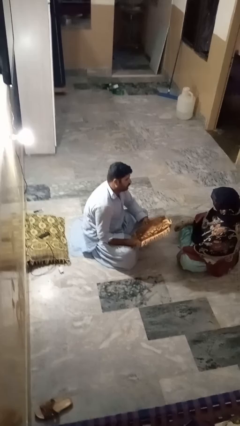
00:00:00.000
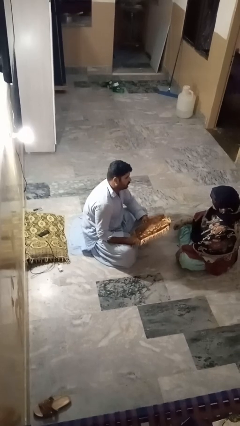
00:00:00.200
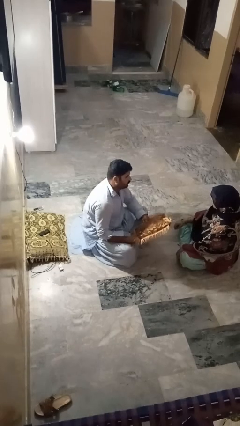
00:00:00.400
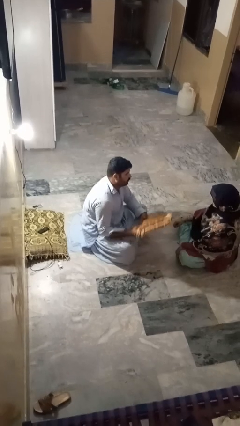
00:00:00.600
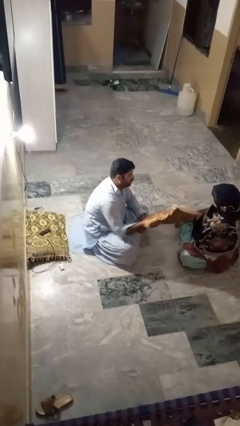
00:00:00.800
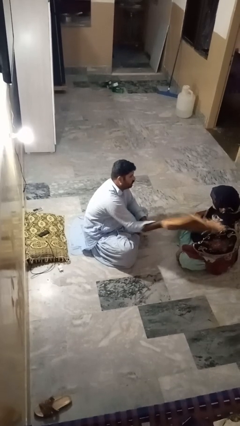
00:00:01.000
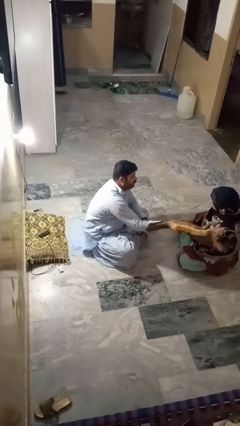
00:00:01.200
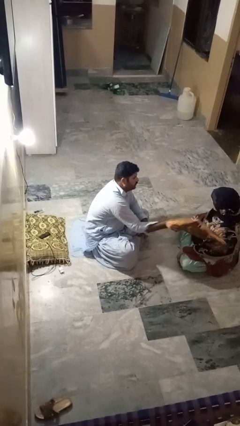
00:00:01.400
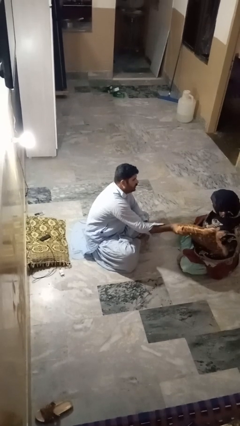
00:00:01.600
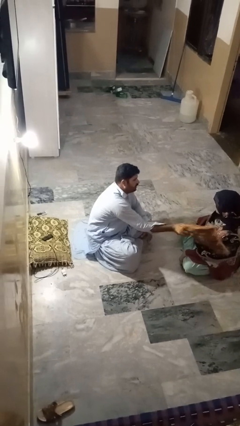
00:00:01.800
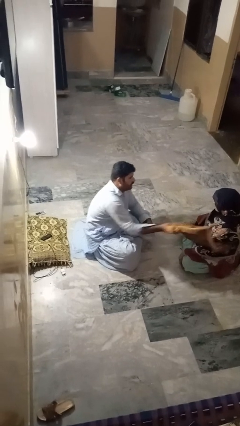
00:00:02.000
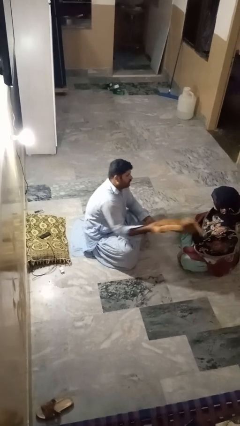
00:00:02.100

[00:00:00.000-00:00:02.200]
person hits person with pillow

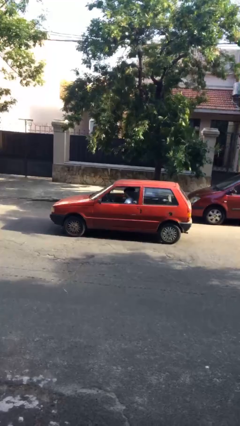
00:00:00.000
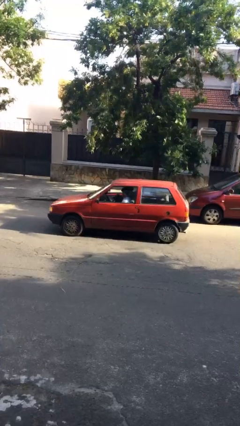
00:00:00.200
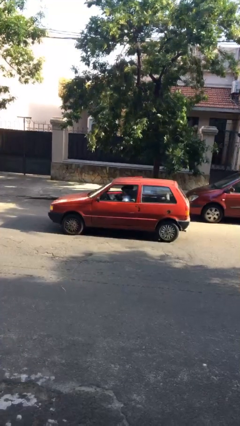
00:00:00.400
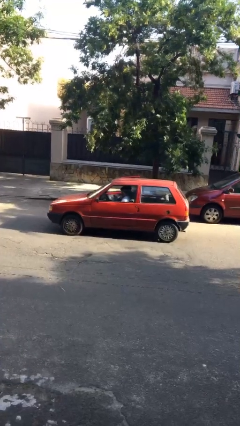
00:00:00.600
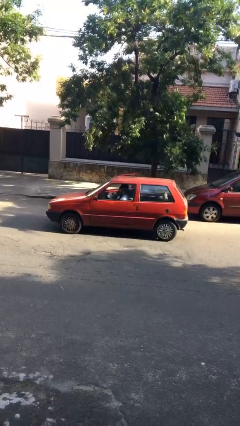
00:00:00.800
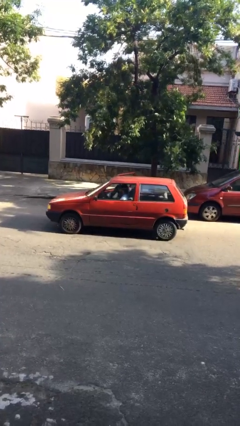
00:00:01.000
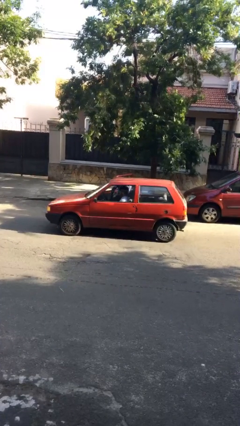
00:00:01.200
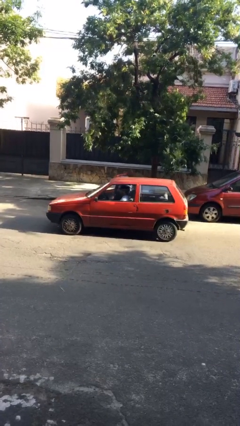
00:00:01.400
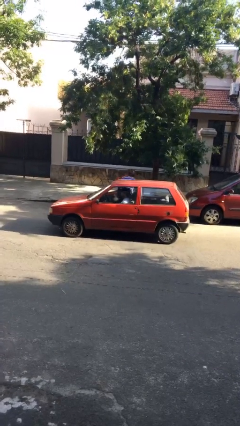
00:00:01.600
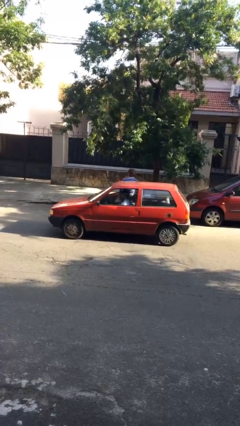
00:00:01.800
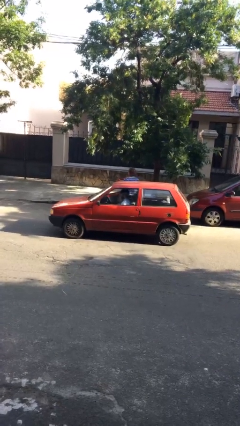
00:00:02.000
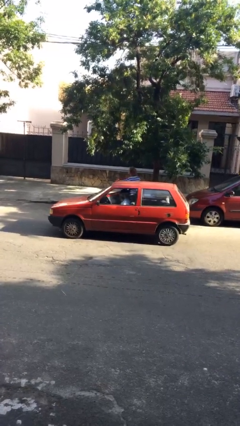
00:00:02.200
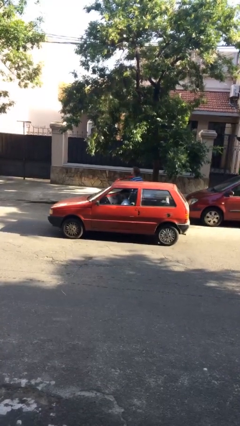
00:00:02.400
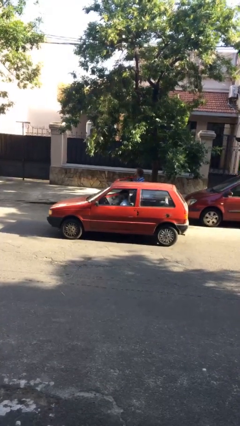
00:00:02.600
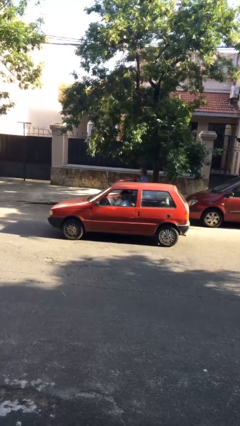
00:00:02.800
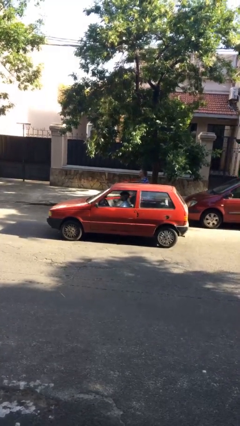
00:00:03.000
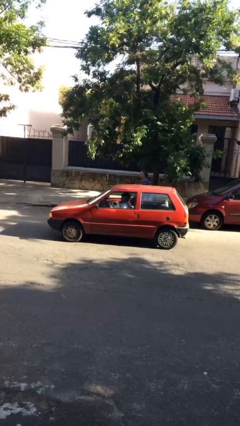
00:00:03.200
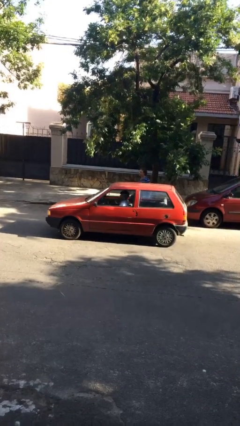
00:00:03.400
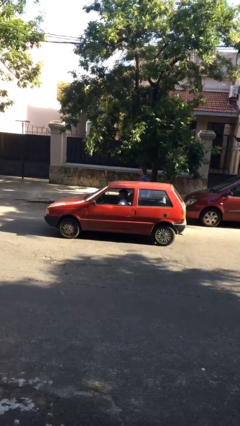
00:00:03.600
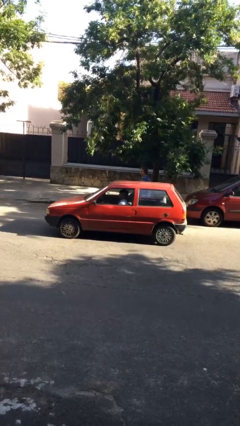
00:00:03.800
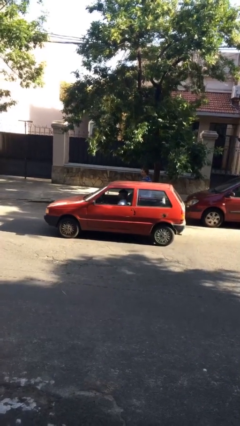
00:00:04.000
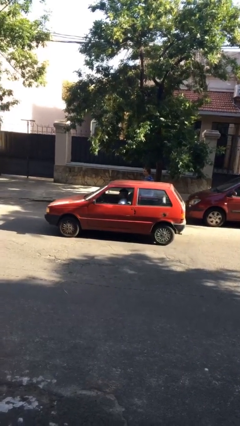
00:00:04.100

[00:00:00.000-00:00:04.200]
car drops off person

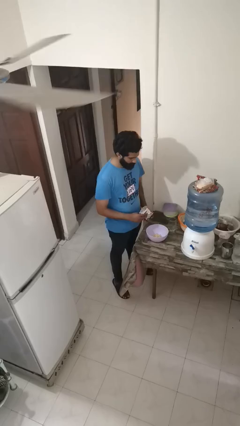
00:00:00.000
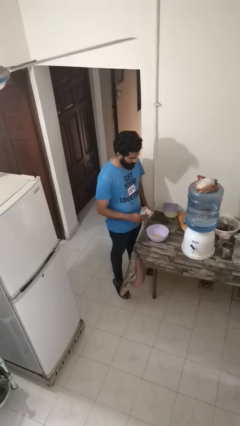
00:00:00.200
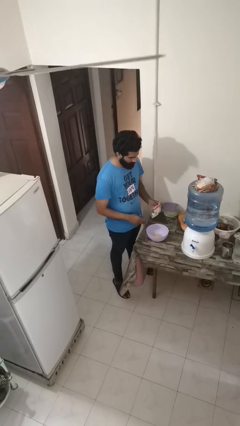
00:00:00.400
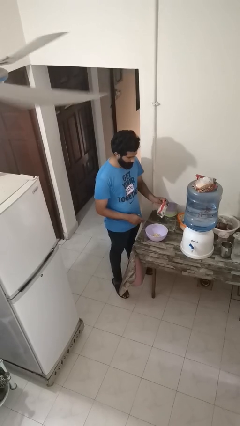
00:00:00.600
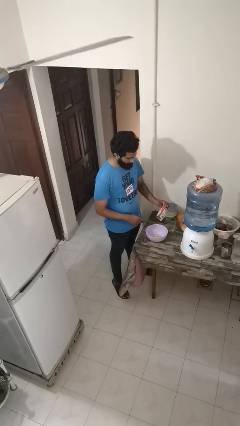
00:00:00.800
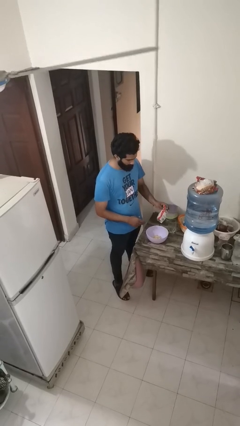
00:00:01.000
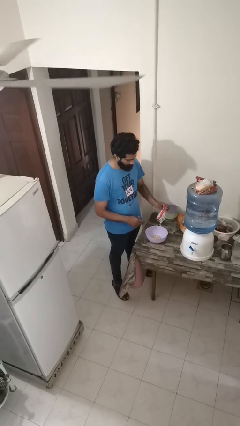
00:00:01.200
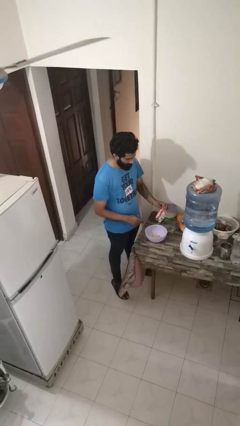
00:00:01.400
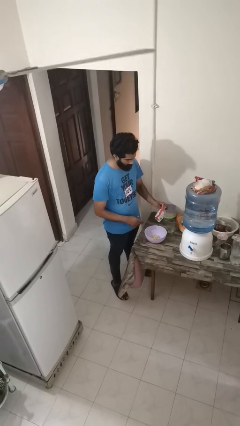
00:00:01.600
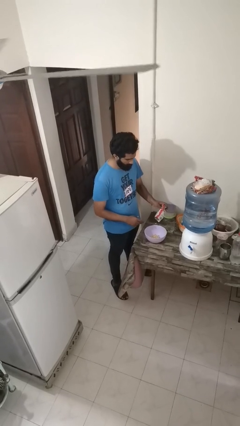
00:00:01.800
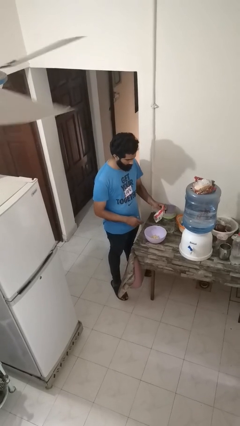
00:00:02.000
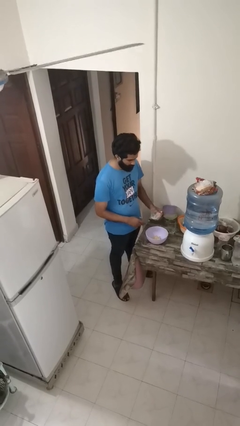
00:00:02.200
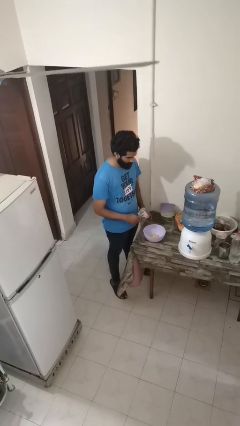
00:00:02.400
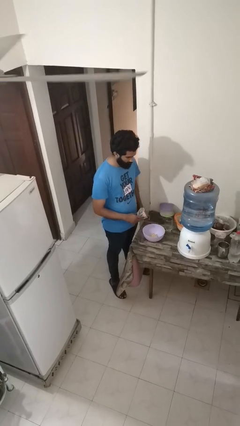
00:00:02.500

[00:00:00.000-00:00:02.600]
person pours into bowl

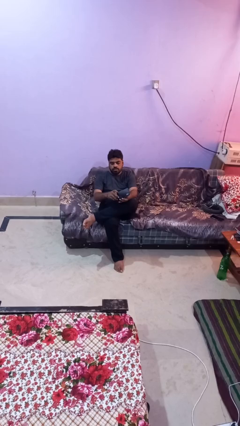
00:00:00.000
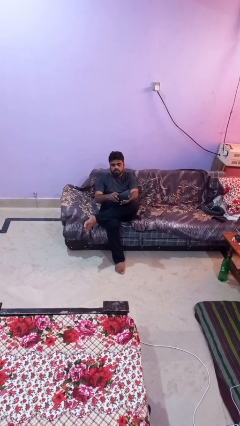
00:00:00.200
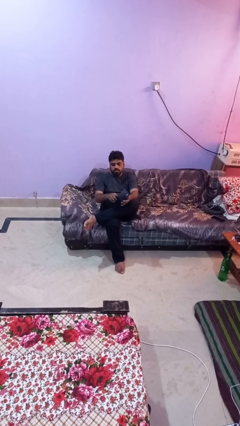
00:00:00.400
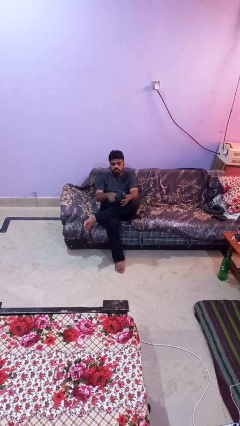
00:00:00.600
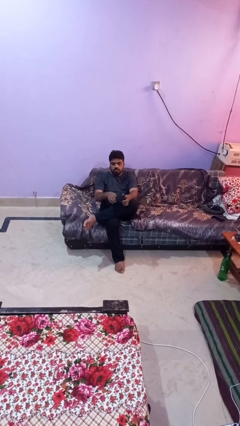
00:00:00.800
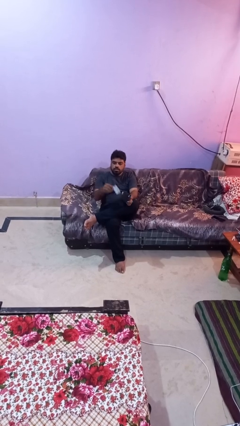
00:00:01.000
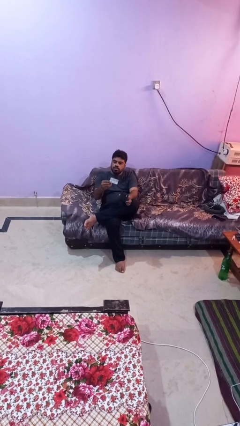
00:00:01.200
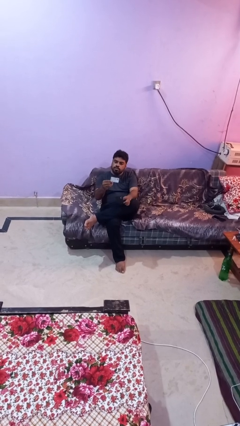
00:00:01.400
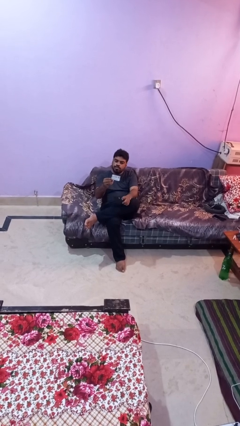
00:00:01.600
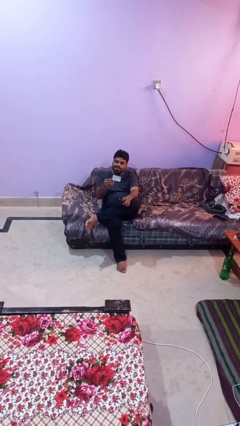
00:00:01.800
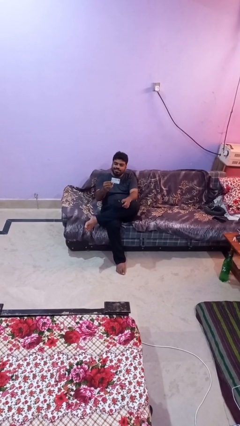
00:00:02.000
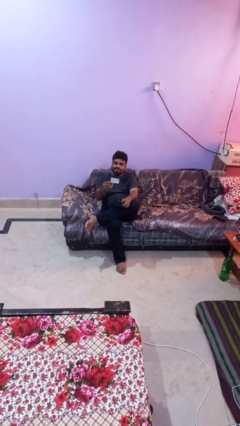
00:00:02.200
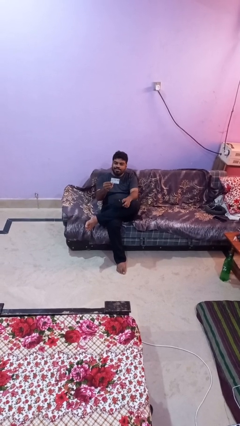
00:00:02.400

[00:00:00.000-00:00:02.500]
person takes object from purse

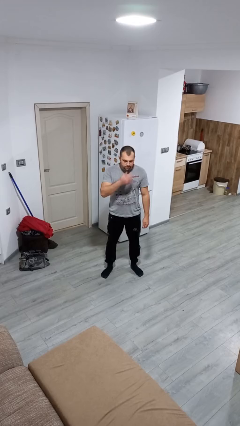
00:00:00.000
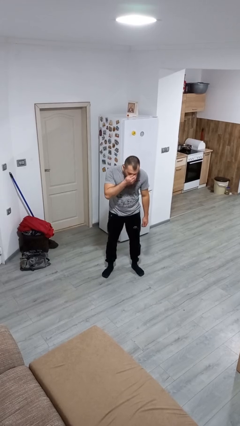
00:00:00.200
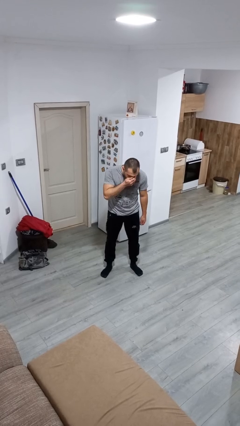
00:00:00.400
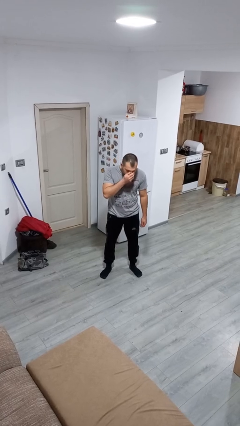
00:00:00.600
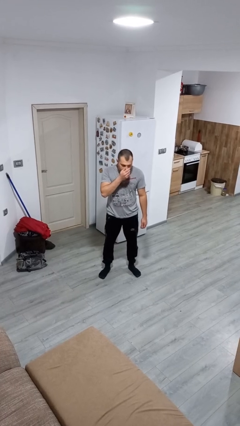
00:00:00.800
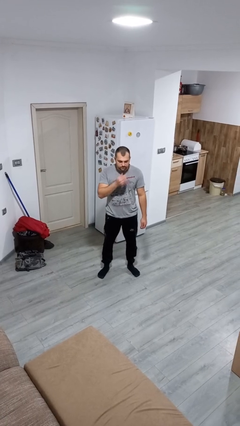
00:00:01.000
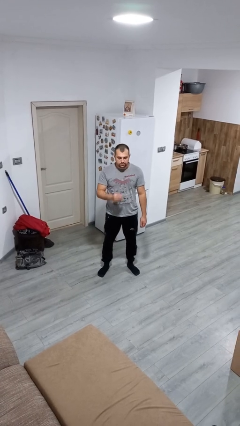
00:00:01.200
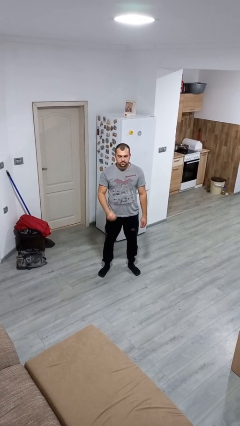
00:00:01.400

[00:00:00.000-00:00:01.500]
person sneezes into hand

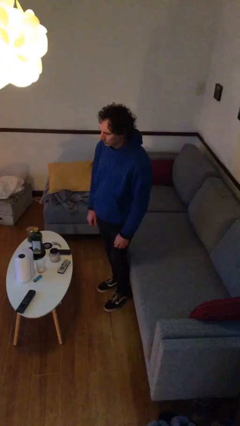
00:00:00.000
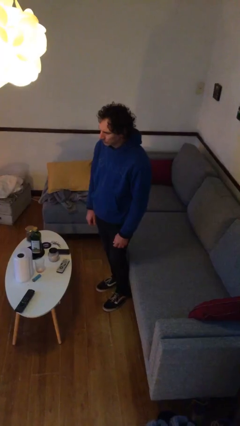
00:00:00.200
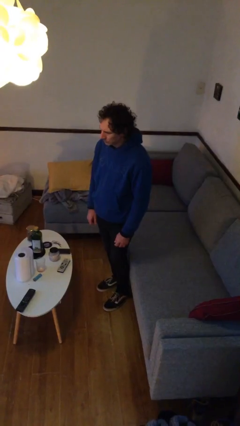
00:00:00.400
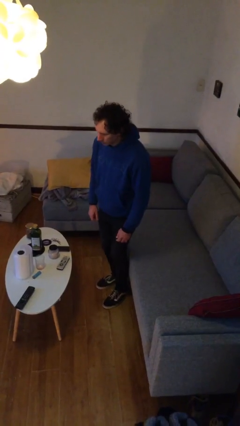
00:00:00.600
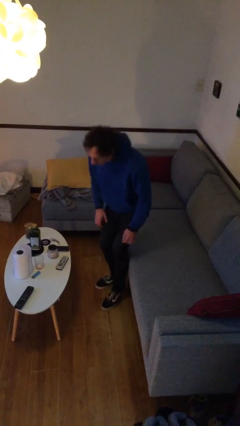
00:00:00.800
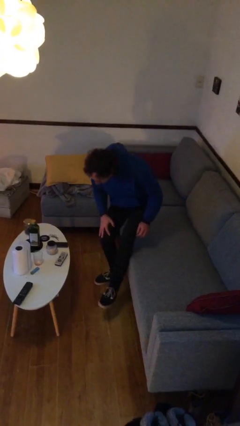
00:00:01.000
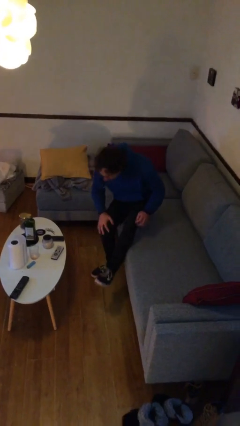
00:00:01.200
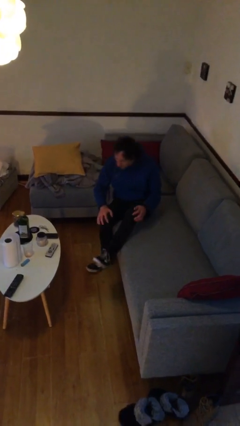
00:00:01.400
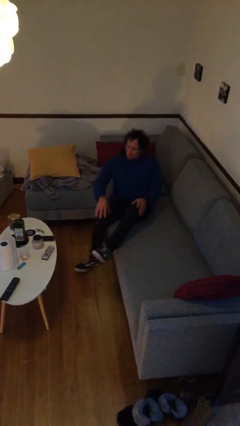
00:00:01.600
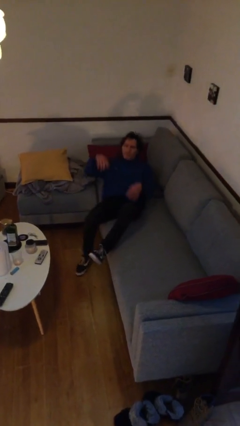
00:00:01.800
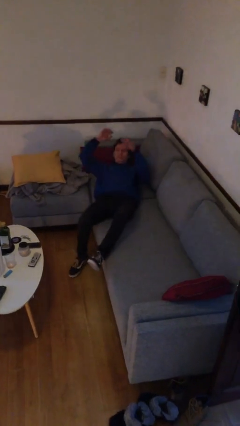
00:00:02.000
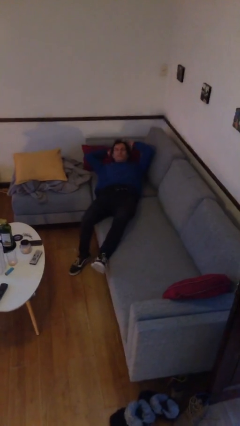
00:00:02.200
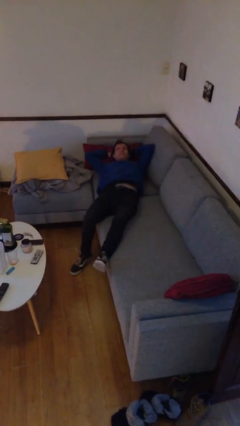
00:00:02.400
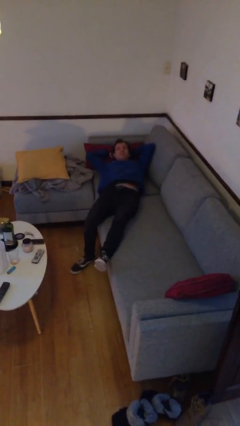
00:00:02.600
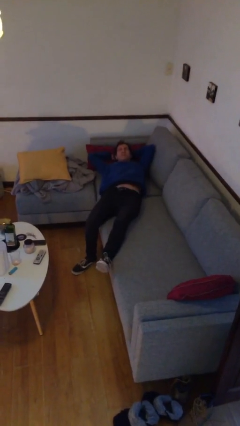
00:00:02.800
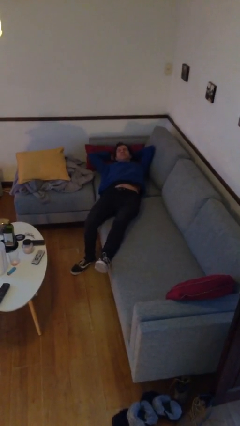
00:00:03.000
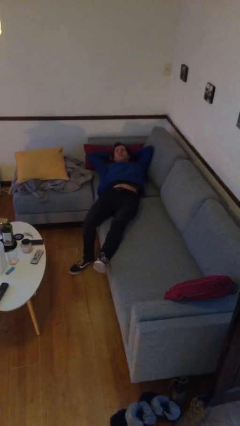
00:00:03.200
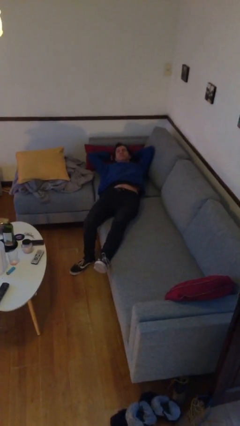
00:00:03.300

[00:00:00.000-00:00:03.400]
person lies down on couch

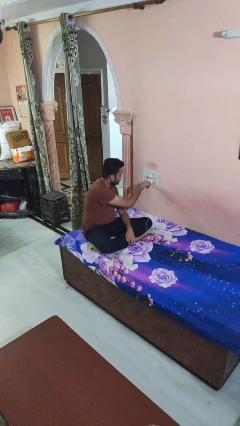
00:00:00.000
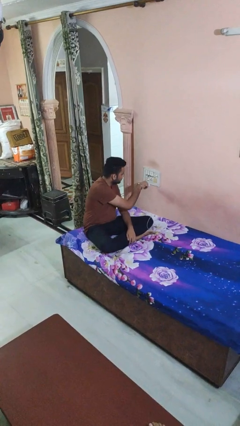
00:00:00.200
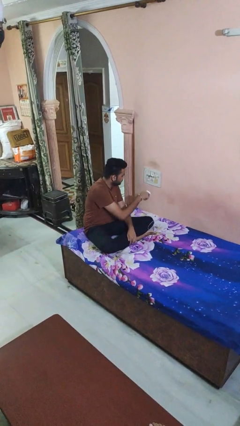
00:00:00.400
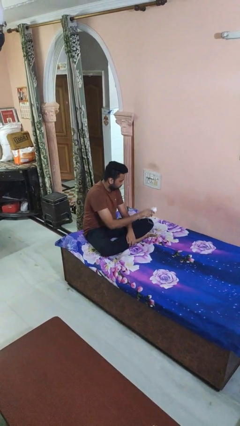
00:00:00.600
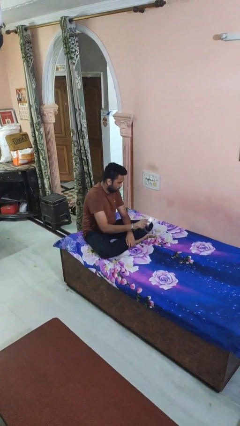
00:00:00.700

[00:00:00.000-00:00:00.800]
person unplugs from electrical socket
